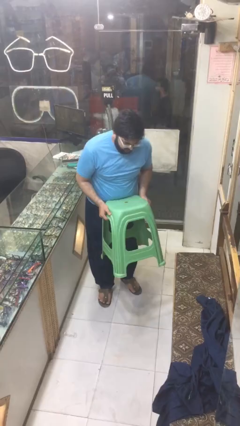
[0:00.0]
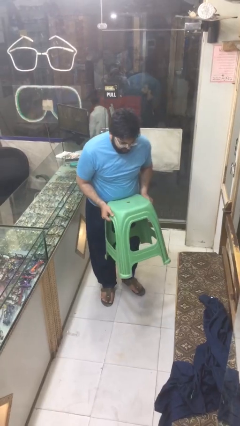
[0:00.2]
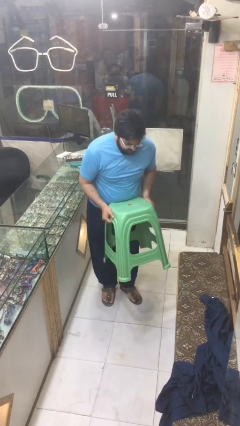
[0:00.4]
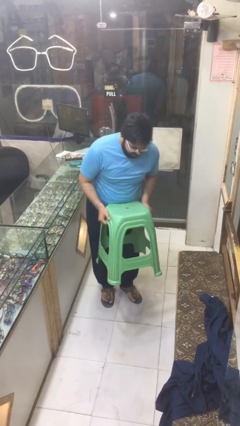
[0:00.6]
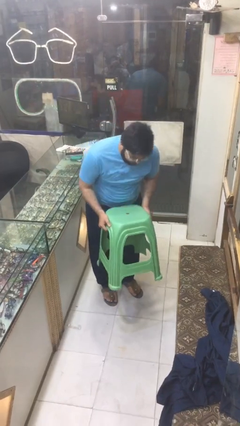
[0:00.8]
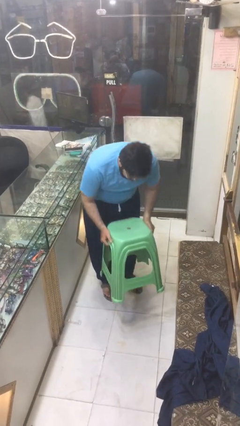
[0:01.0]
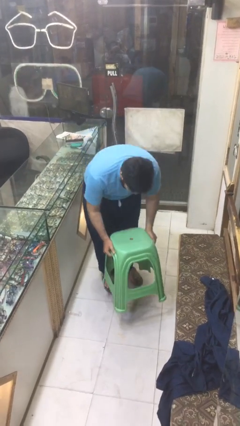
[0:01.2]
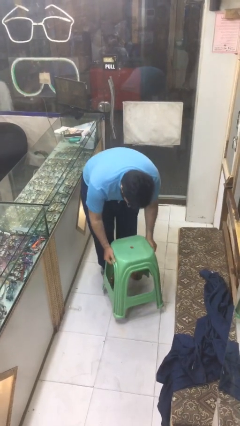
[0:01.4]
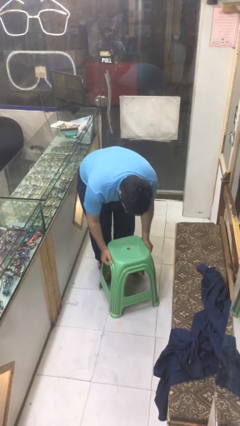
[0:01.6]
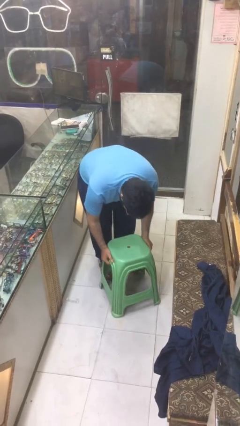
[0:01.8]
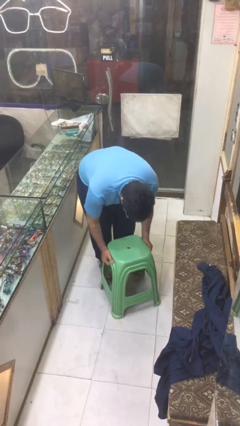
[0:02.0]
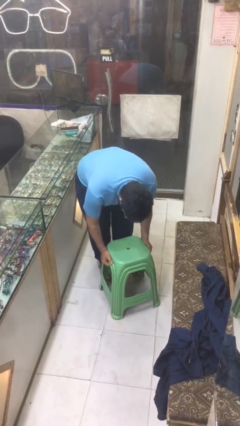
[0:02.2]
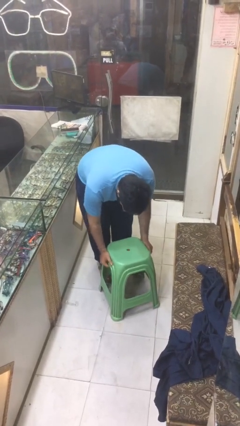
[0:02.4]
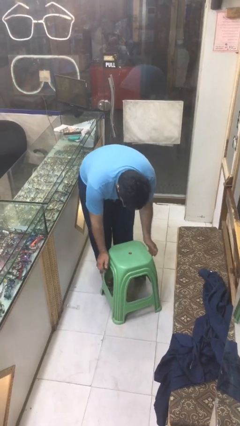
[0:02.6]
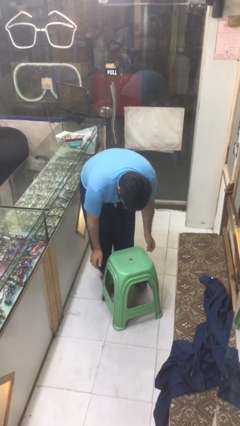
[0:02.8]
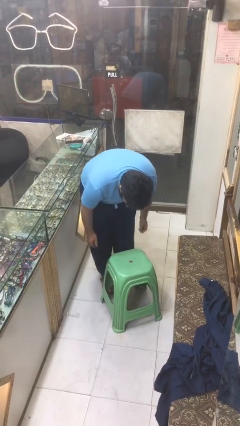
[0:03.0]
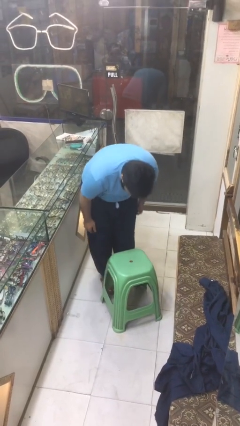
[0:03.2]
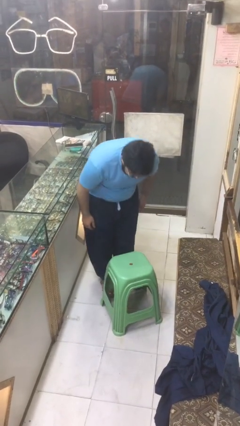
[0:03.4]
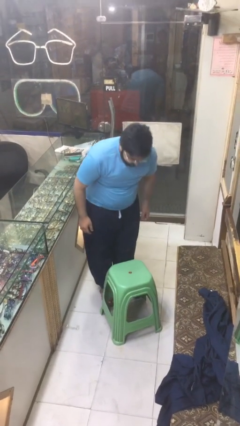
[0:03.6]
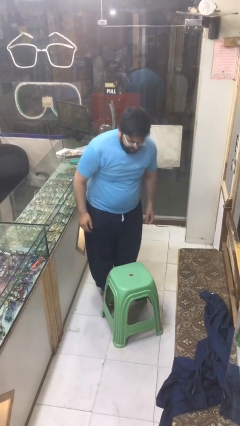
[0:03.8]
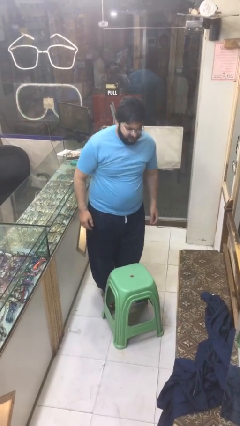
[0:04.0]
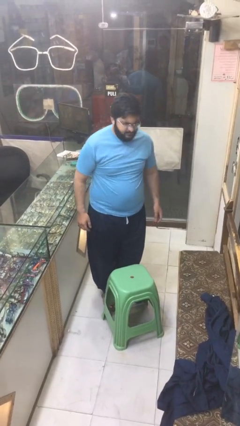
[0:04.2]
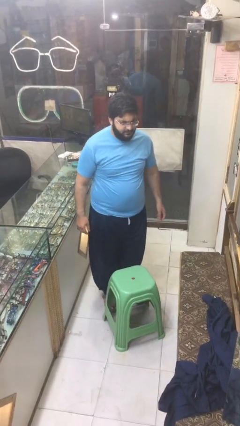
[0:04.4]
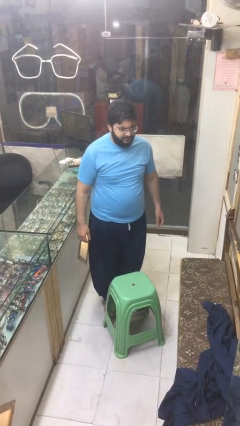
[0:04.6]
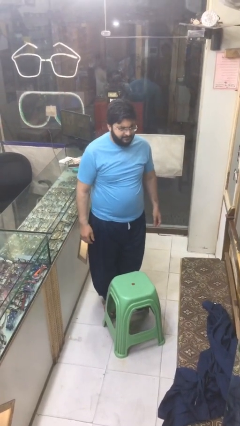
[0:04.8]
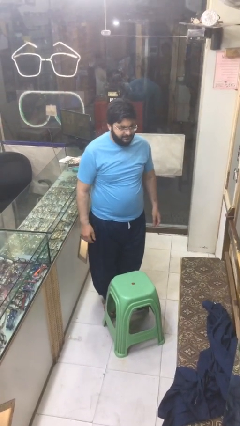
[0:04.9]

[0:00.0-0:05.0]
person puts down object on floor

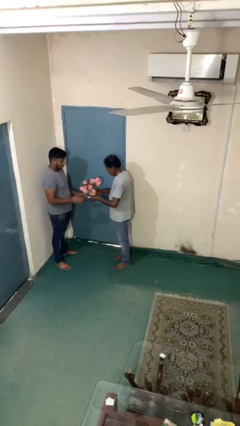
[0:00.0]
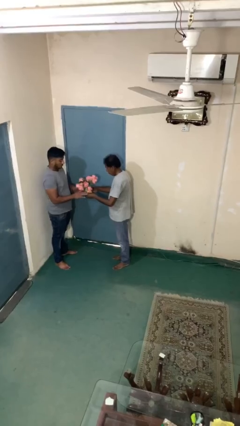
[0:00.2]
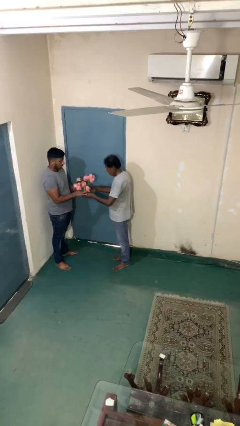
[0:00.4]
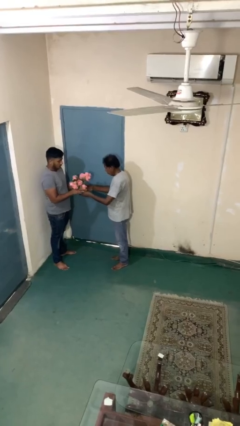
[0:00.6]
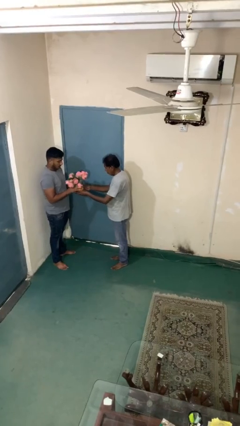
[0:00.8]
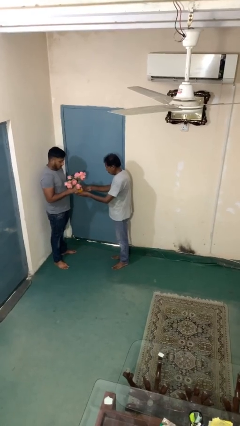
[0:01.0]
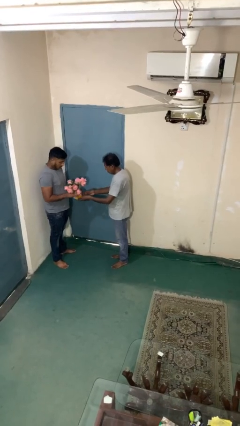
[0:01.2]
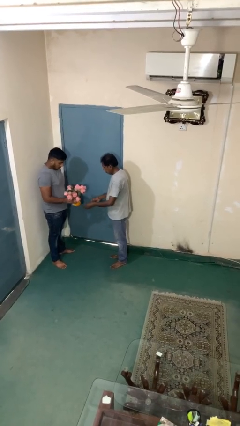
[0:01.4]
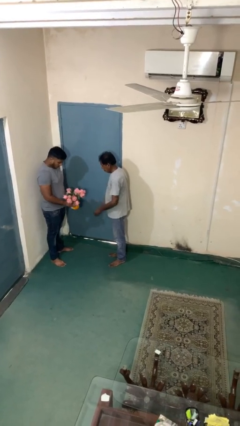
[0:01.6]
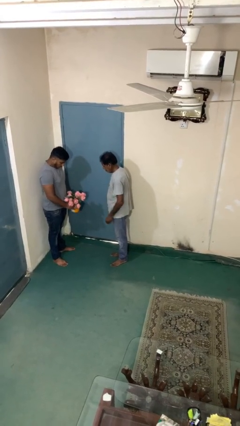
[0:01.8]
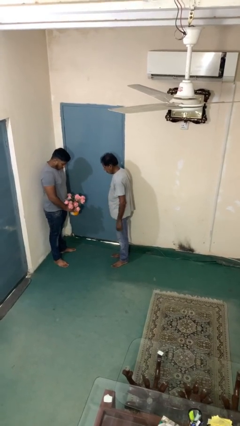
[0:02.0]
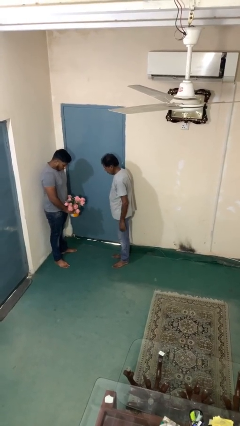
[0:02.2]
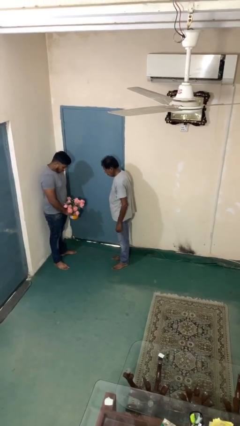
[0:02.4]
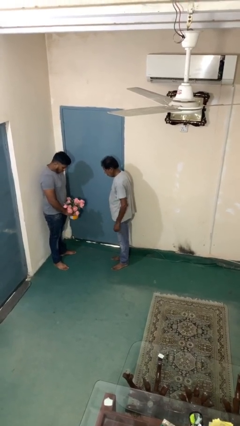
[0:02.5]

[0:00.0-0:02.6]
person transfers object to person

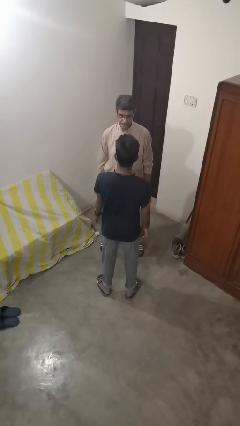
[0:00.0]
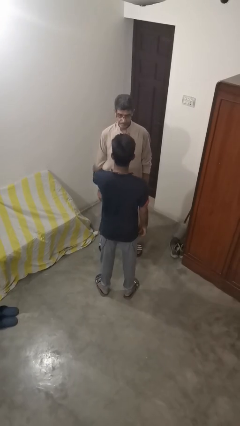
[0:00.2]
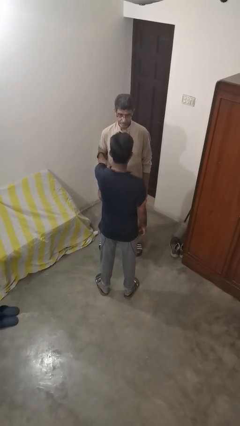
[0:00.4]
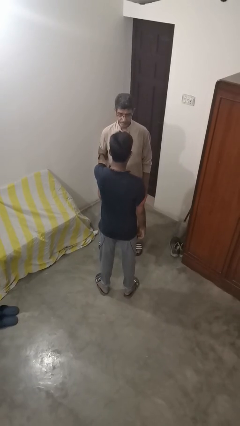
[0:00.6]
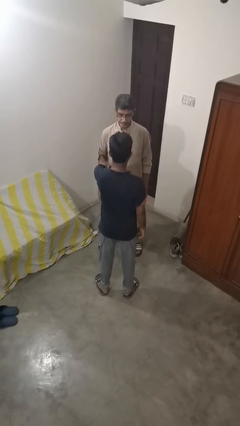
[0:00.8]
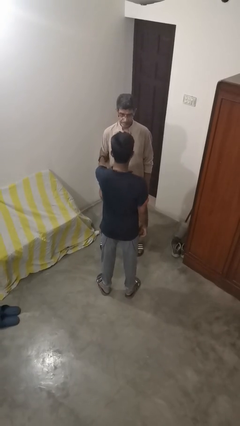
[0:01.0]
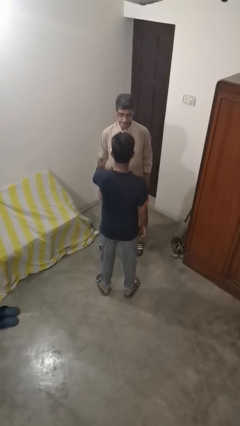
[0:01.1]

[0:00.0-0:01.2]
person grabs person by bicep

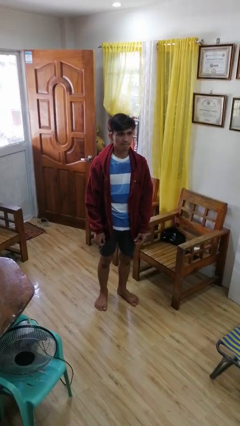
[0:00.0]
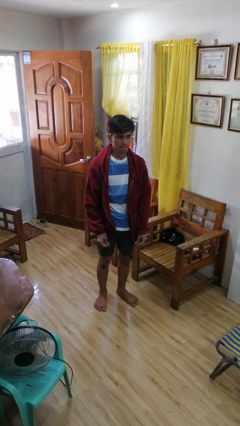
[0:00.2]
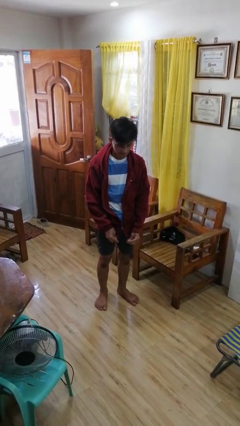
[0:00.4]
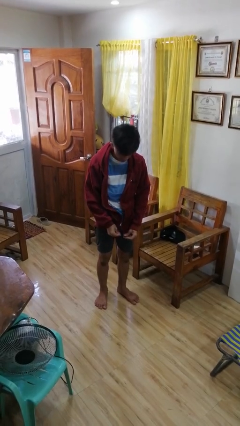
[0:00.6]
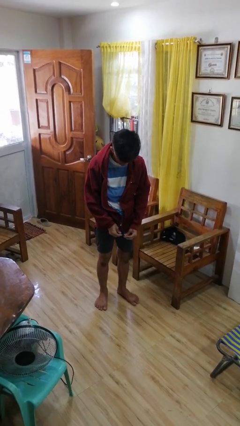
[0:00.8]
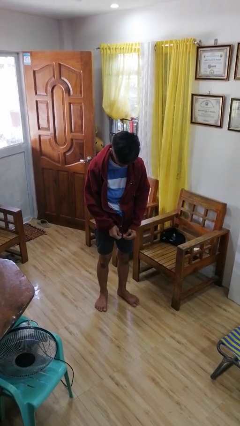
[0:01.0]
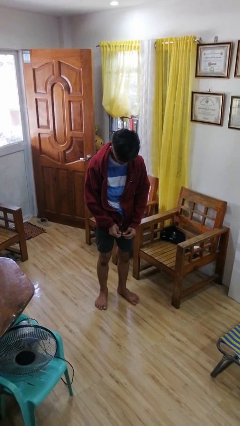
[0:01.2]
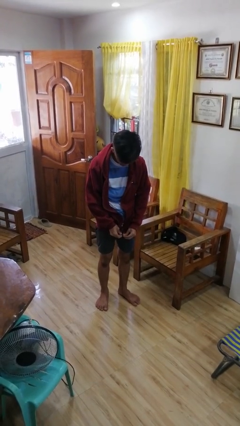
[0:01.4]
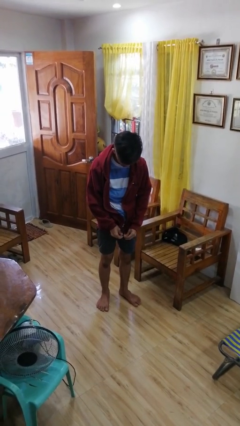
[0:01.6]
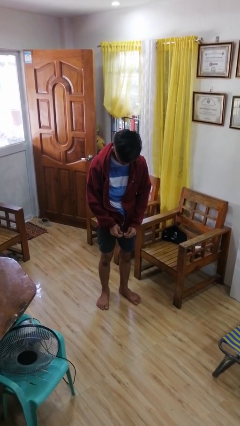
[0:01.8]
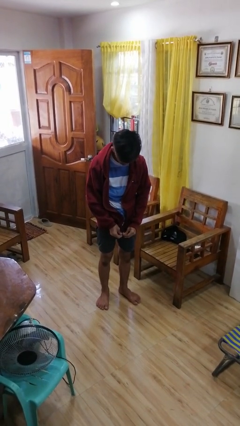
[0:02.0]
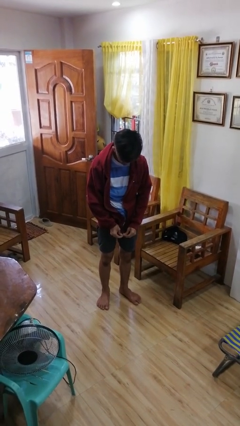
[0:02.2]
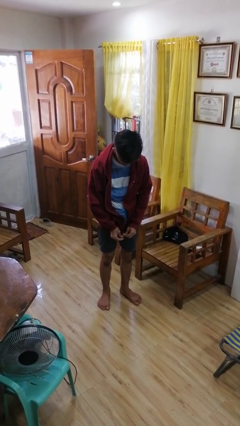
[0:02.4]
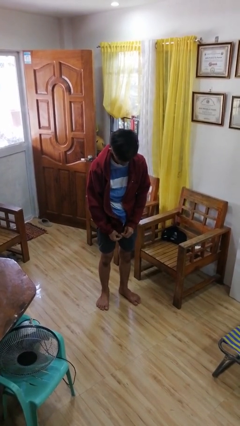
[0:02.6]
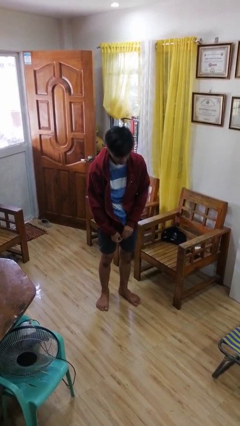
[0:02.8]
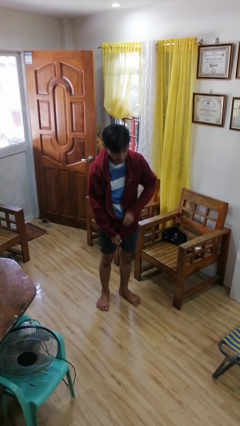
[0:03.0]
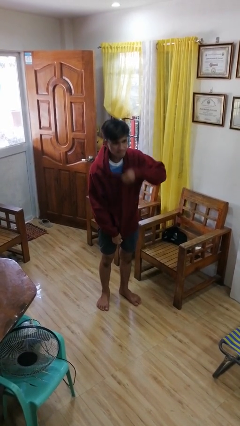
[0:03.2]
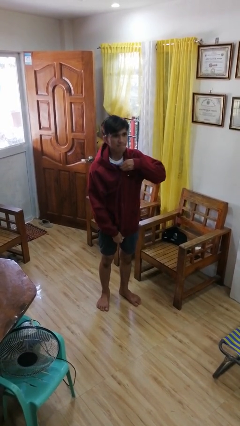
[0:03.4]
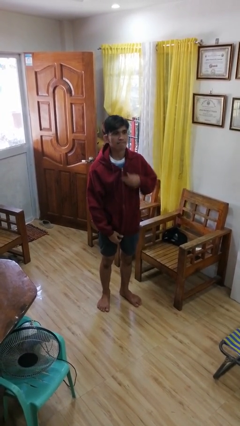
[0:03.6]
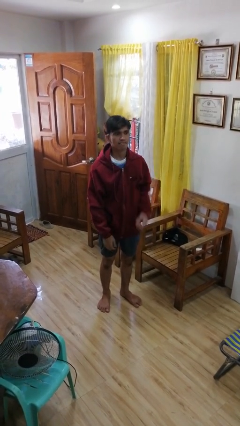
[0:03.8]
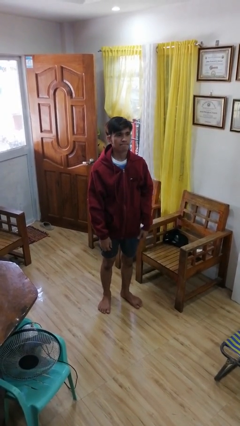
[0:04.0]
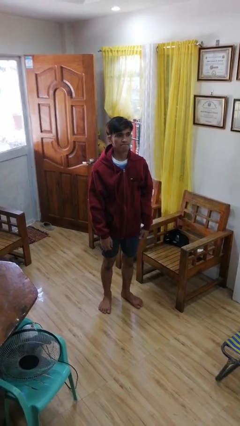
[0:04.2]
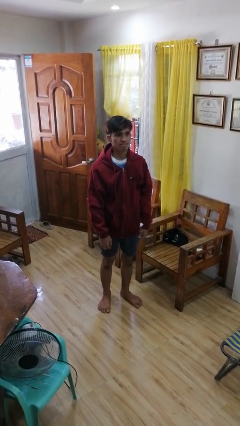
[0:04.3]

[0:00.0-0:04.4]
person zips up jacket

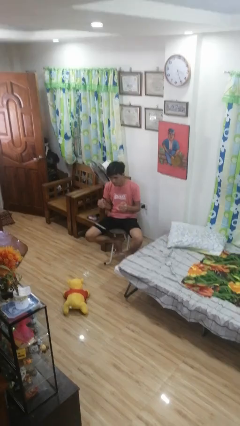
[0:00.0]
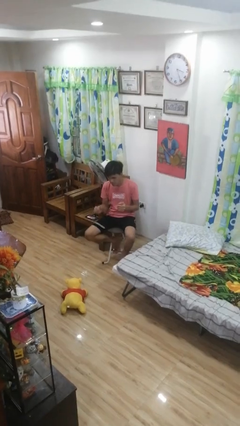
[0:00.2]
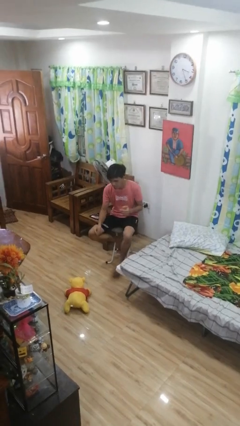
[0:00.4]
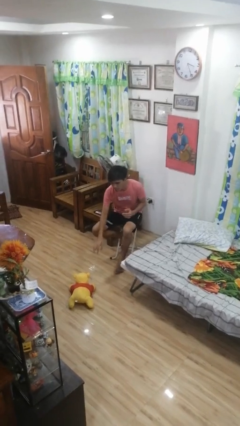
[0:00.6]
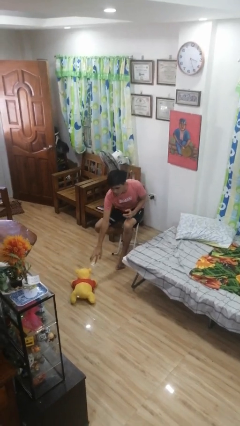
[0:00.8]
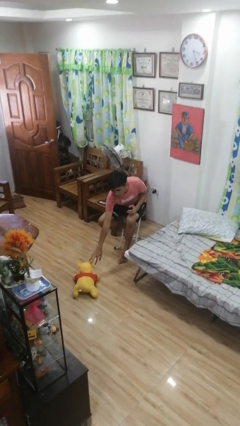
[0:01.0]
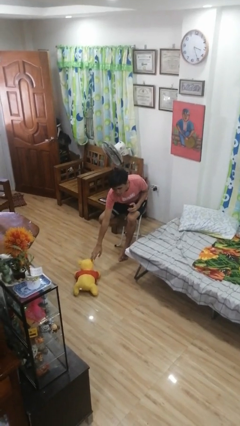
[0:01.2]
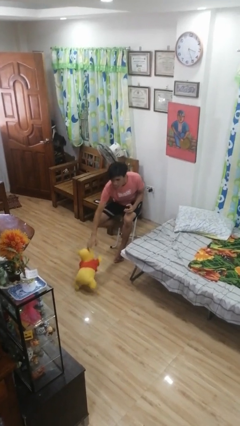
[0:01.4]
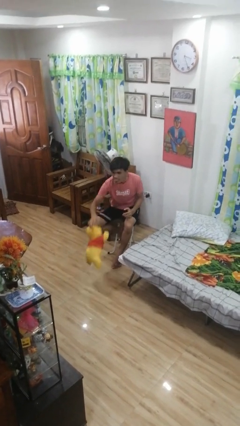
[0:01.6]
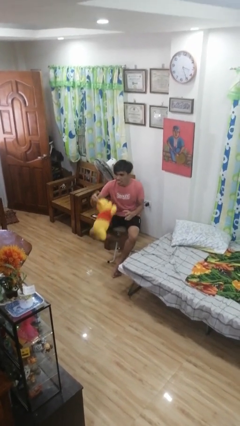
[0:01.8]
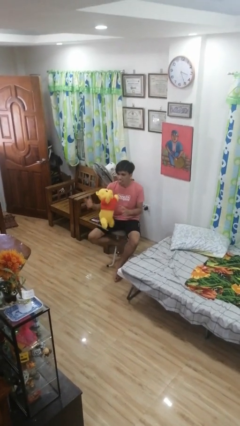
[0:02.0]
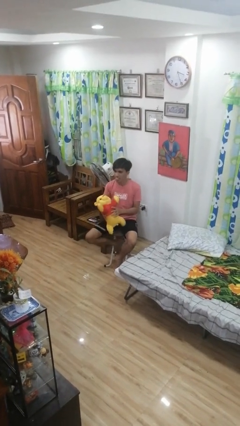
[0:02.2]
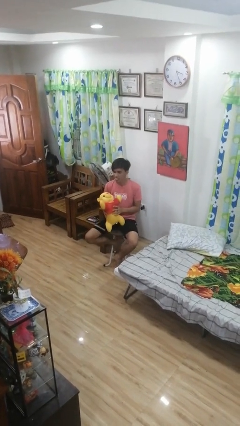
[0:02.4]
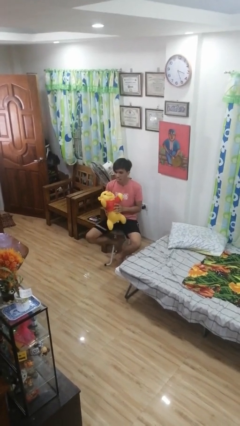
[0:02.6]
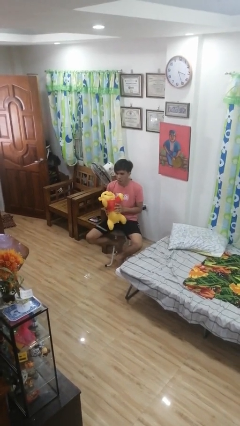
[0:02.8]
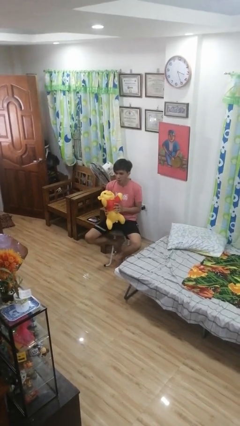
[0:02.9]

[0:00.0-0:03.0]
person picks up object from floor

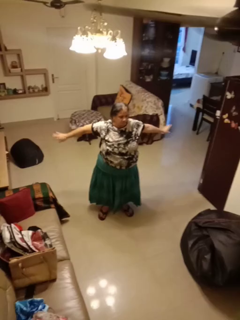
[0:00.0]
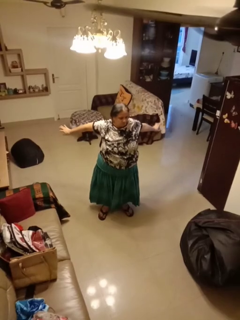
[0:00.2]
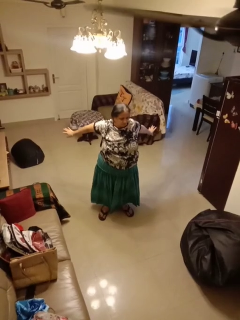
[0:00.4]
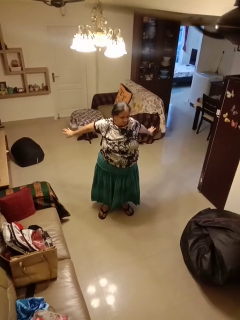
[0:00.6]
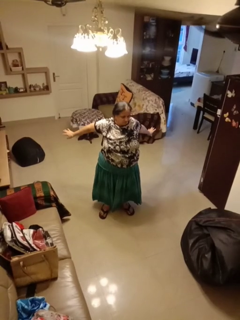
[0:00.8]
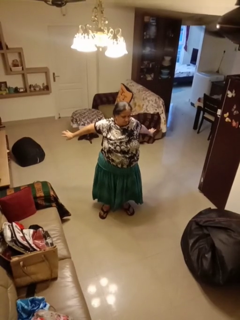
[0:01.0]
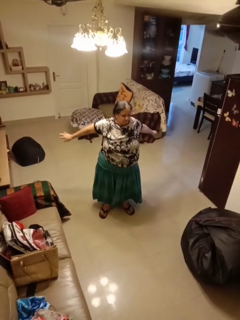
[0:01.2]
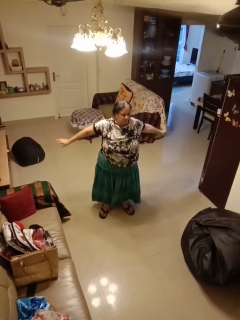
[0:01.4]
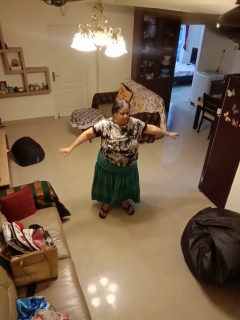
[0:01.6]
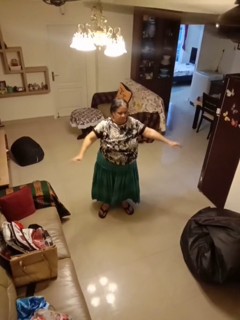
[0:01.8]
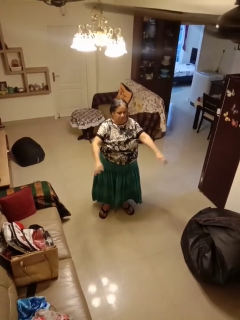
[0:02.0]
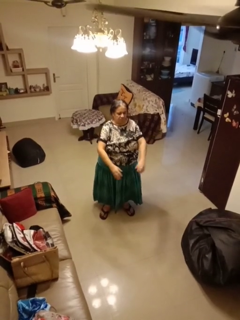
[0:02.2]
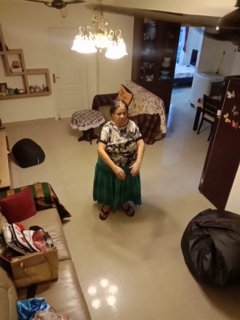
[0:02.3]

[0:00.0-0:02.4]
person stretches arms to side
